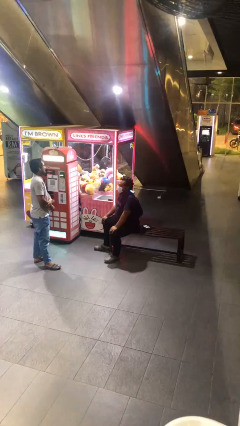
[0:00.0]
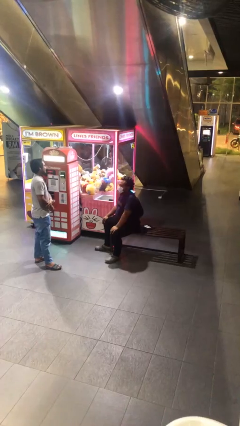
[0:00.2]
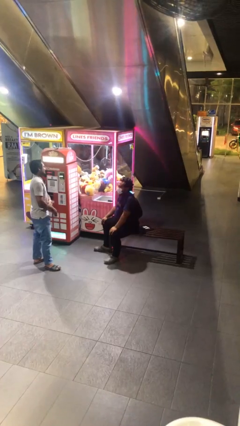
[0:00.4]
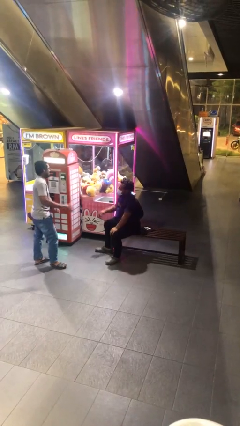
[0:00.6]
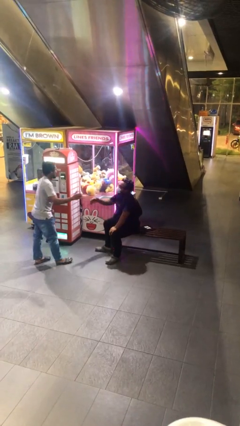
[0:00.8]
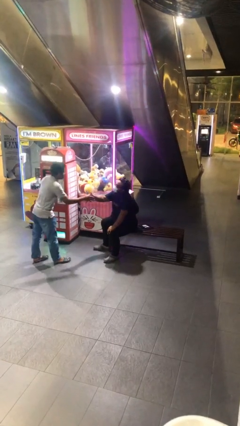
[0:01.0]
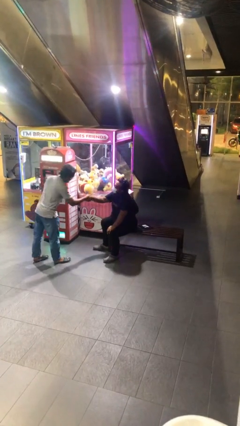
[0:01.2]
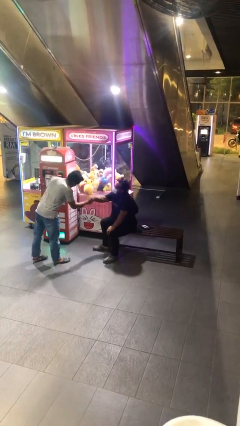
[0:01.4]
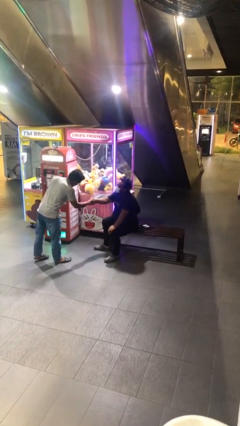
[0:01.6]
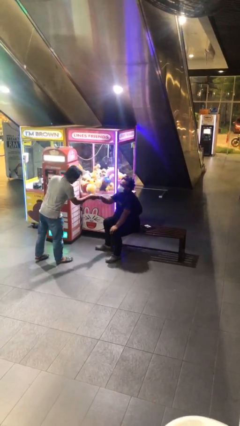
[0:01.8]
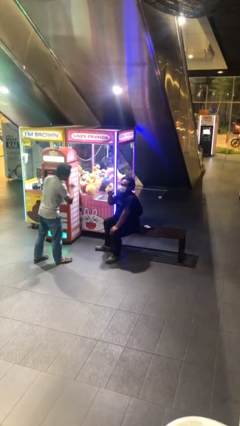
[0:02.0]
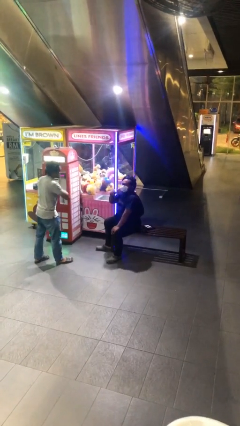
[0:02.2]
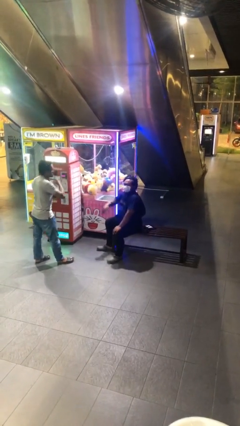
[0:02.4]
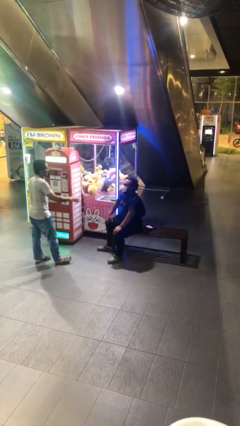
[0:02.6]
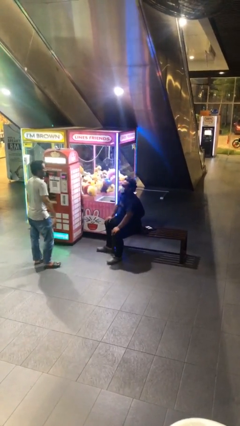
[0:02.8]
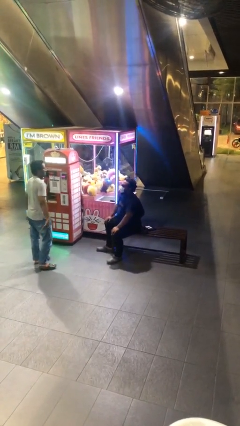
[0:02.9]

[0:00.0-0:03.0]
person shakes hand

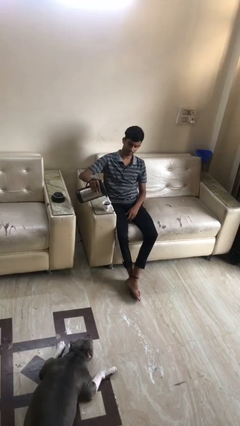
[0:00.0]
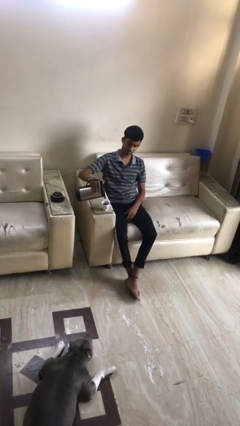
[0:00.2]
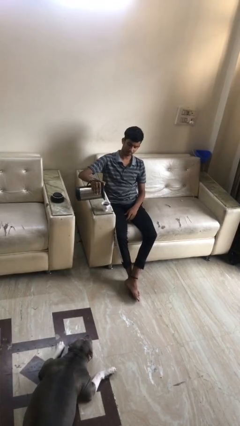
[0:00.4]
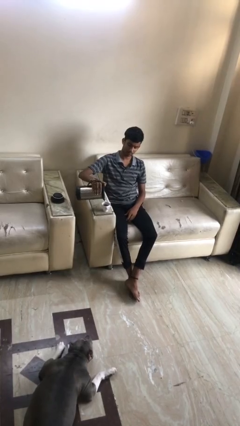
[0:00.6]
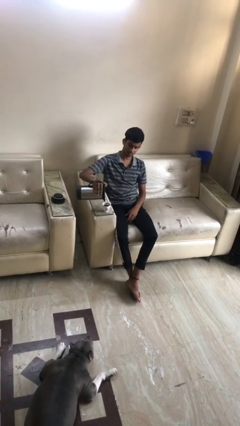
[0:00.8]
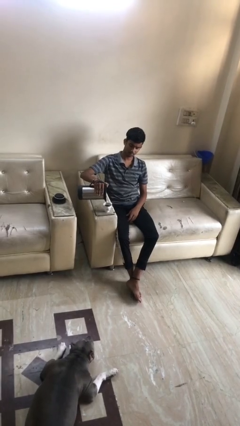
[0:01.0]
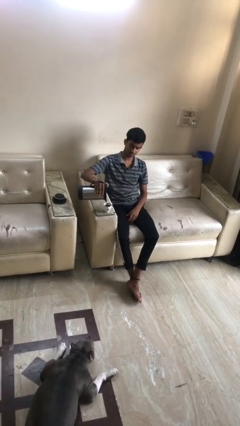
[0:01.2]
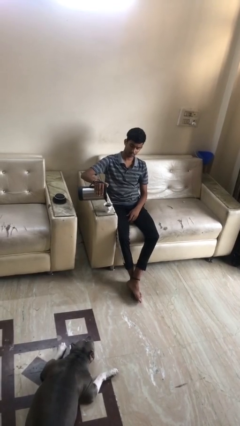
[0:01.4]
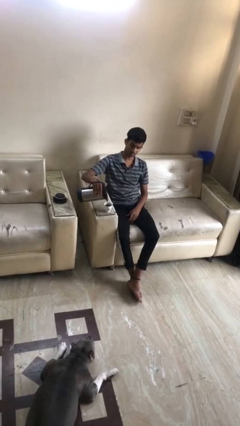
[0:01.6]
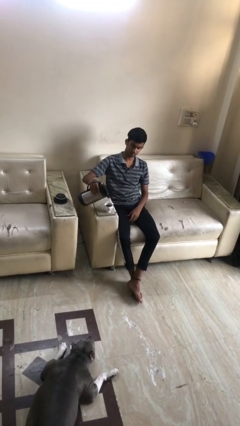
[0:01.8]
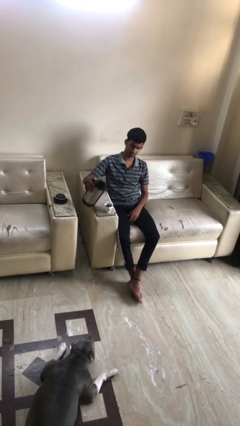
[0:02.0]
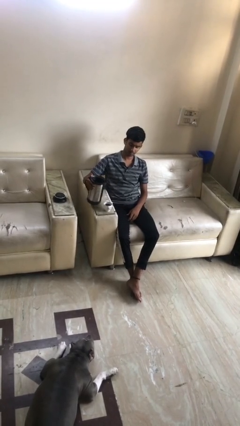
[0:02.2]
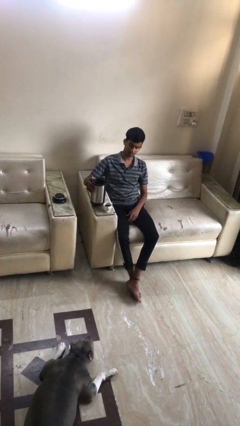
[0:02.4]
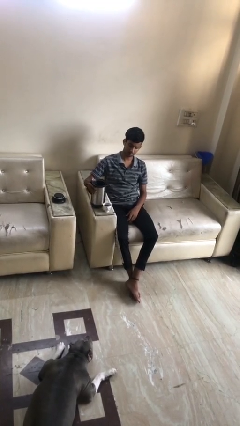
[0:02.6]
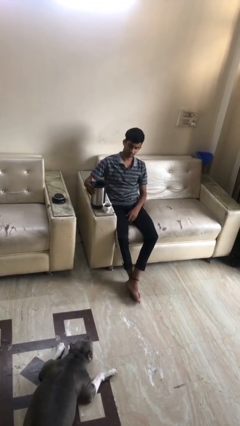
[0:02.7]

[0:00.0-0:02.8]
person pours coffee into mug

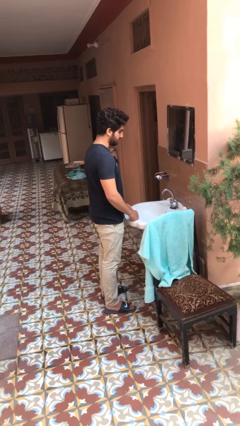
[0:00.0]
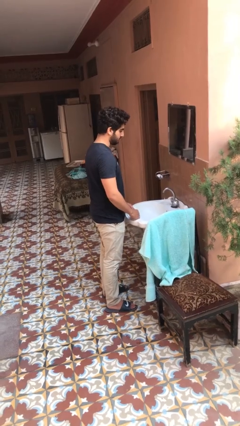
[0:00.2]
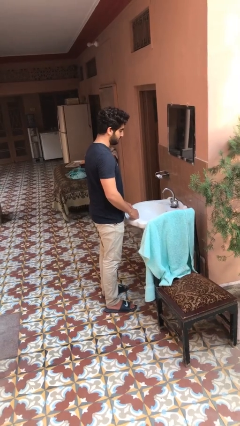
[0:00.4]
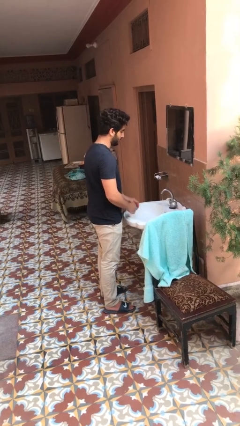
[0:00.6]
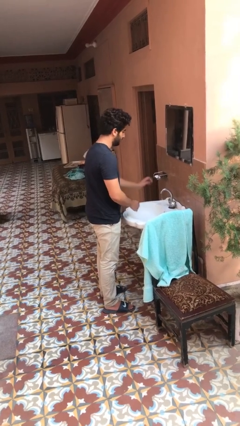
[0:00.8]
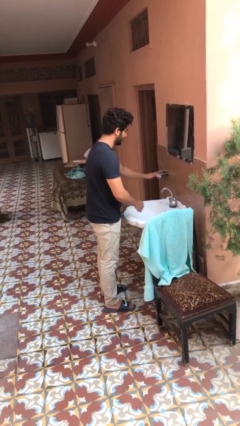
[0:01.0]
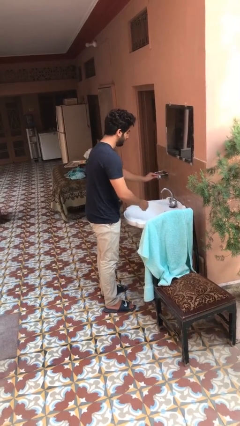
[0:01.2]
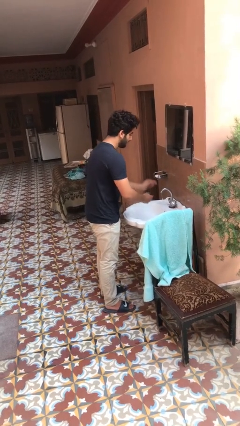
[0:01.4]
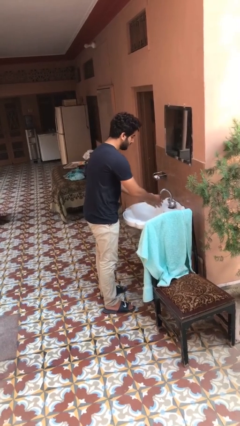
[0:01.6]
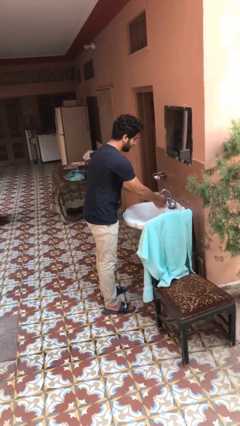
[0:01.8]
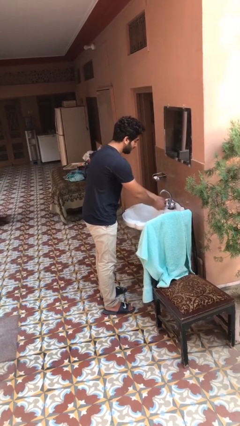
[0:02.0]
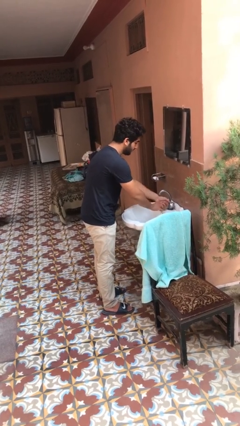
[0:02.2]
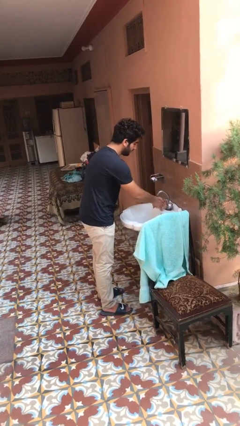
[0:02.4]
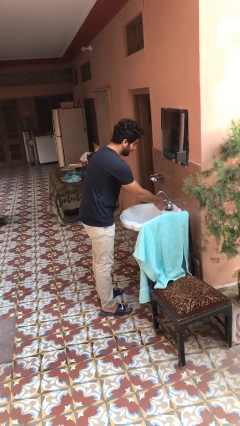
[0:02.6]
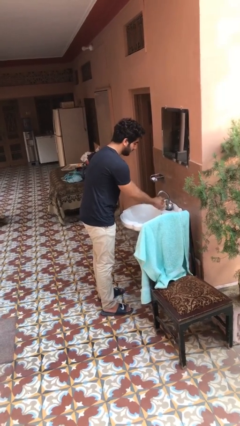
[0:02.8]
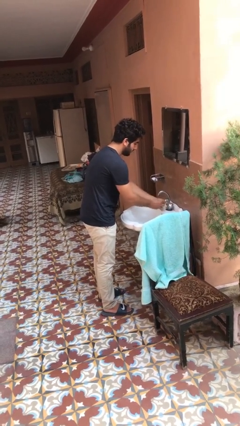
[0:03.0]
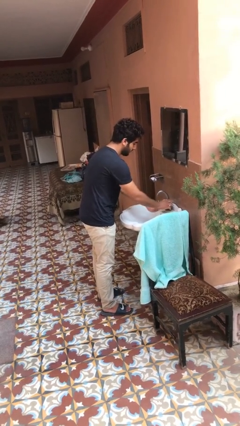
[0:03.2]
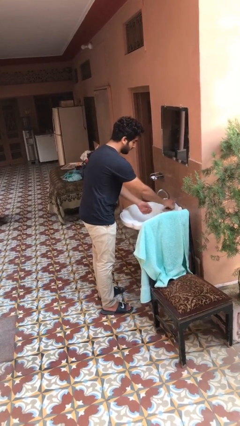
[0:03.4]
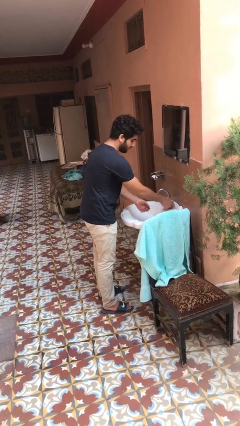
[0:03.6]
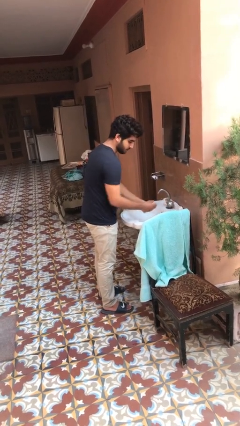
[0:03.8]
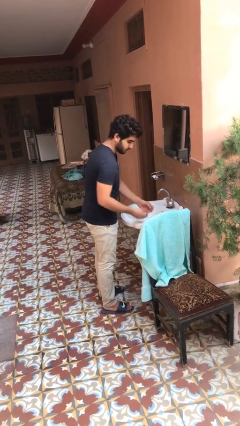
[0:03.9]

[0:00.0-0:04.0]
person washes hands

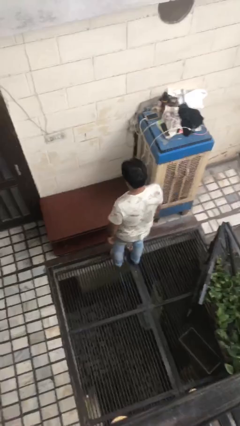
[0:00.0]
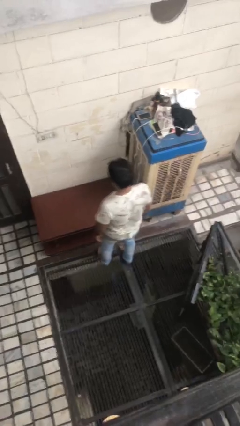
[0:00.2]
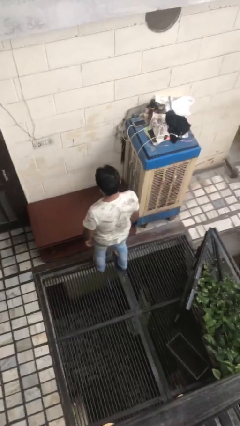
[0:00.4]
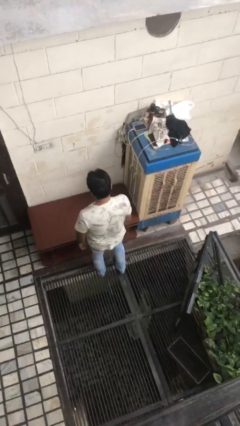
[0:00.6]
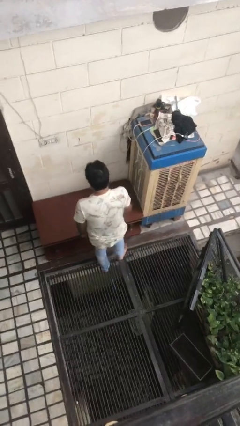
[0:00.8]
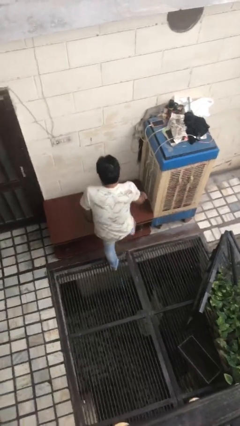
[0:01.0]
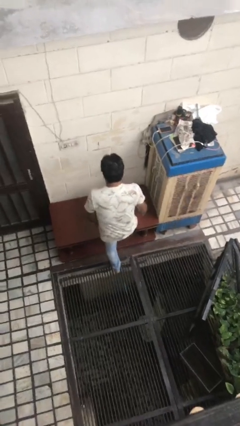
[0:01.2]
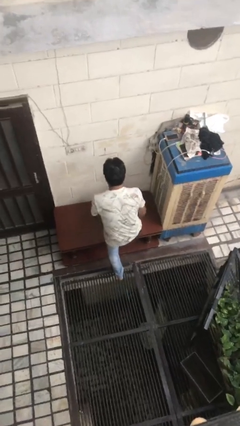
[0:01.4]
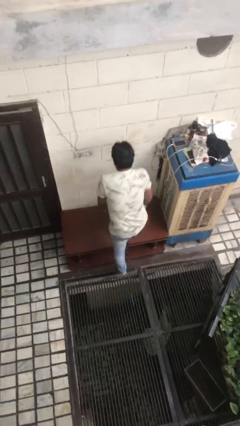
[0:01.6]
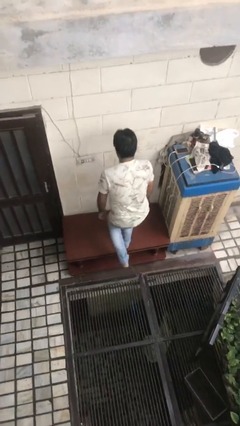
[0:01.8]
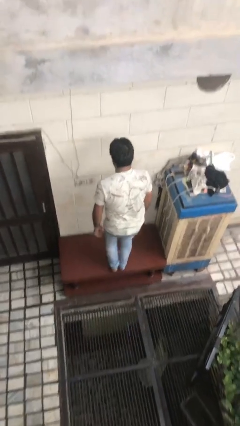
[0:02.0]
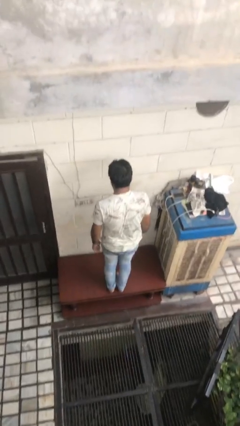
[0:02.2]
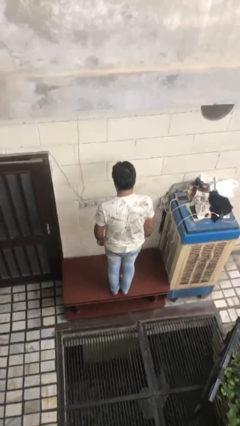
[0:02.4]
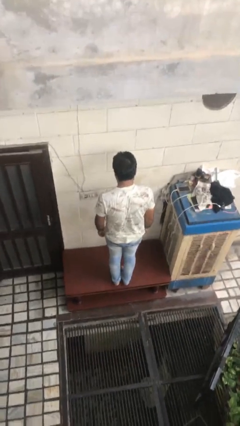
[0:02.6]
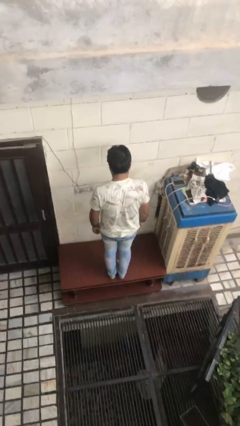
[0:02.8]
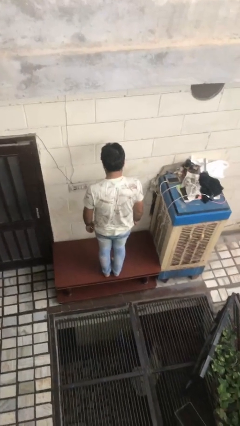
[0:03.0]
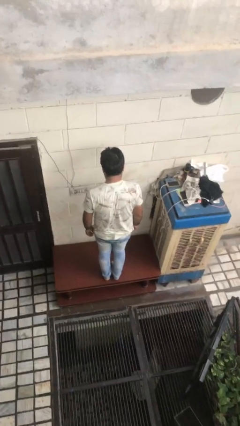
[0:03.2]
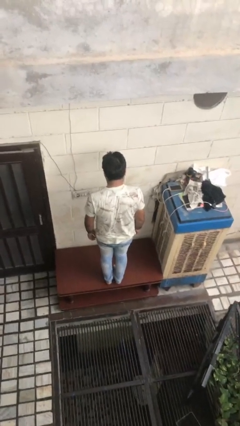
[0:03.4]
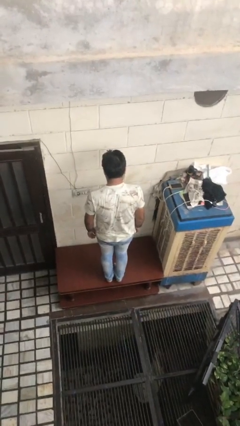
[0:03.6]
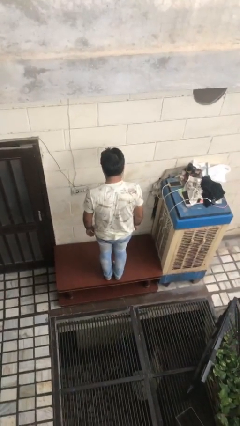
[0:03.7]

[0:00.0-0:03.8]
person climbs on table

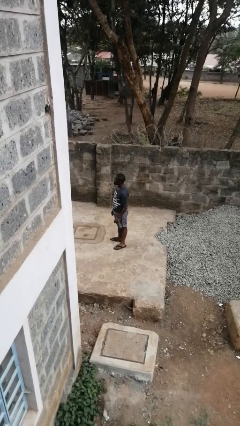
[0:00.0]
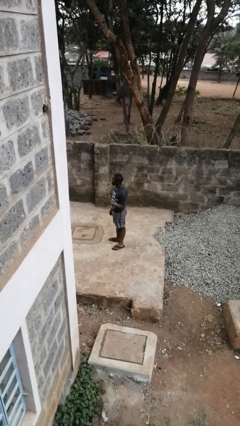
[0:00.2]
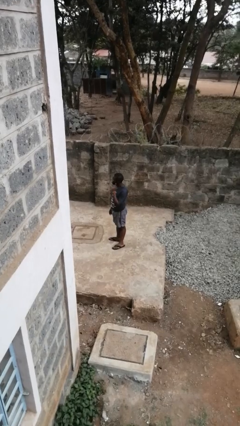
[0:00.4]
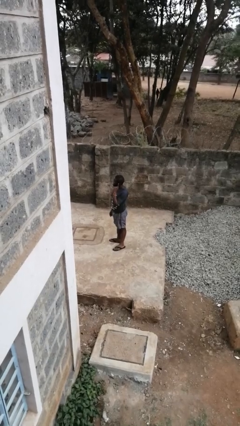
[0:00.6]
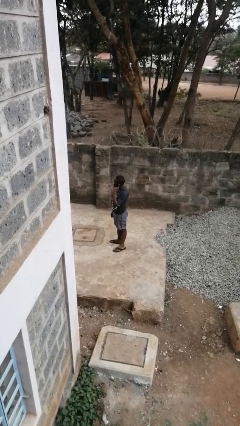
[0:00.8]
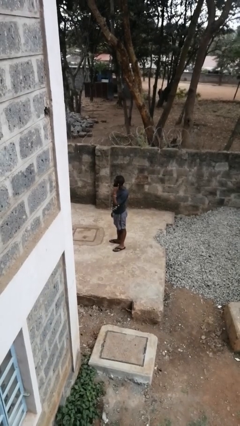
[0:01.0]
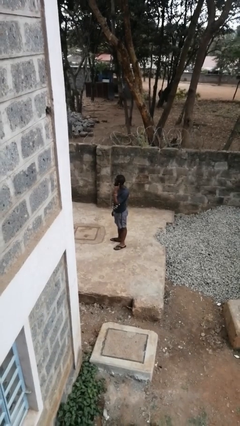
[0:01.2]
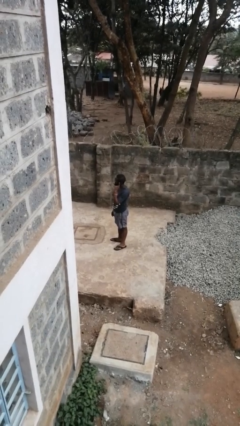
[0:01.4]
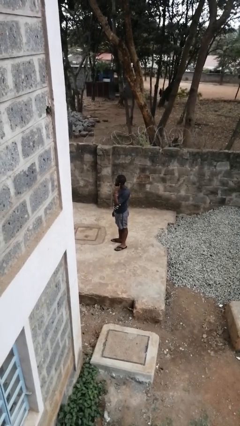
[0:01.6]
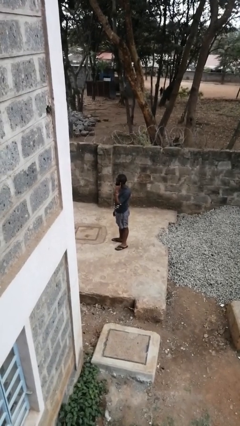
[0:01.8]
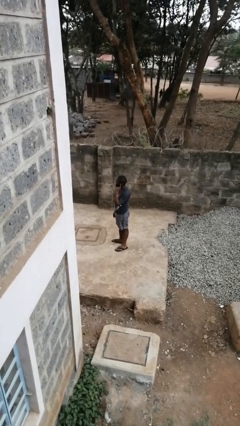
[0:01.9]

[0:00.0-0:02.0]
person gestures listen closely

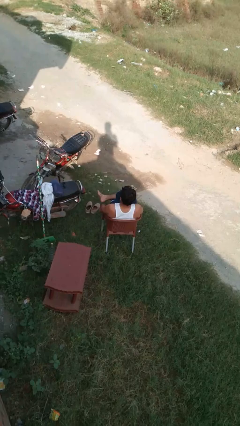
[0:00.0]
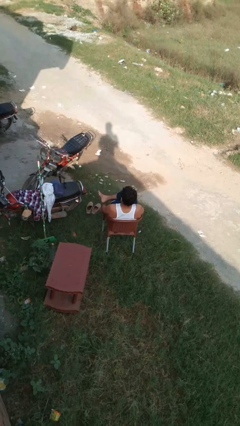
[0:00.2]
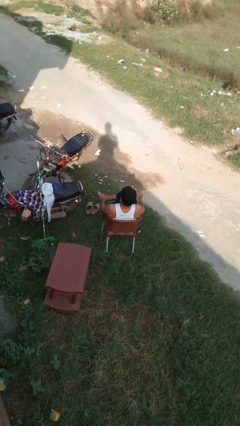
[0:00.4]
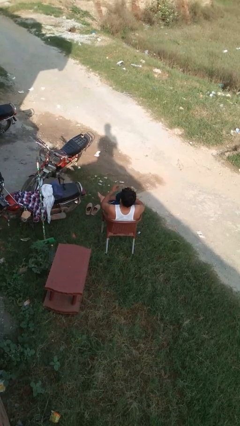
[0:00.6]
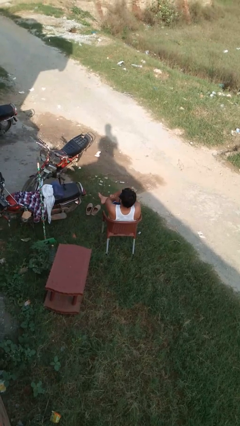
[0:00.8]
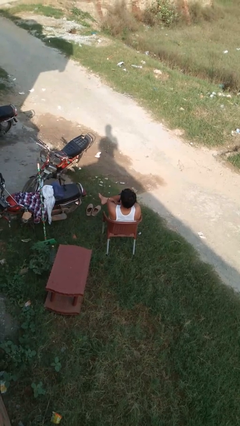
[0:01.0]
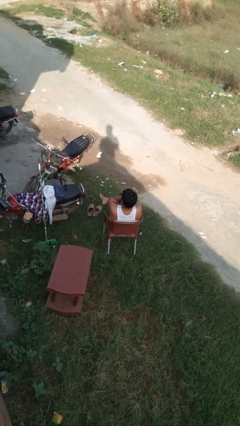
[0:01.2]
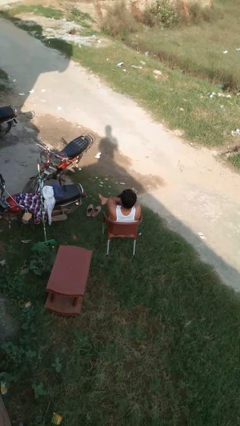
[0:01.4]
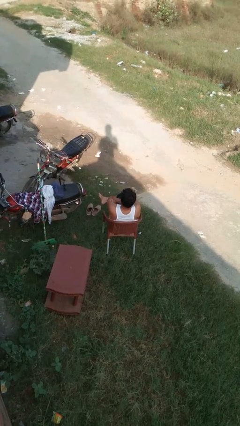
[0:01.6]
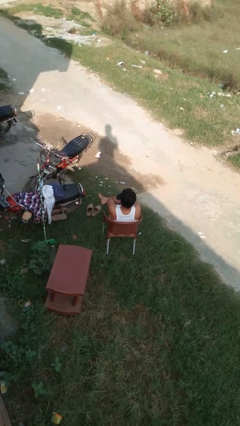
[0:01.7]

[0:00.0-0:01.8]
person crosses arms
